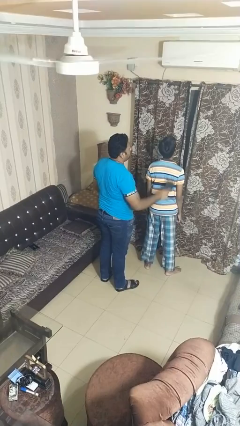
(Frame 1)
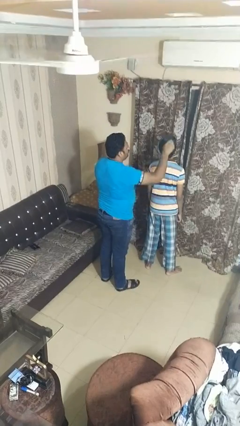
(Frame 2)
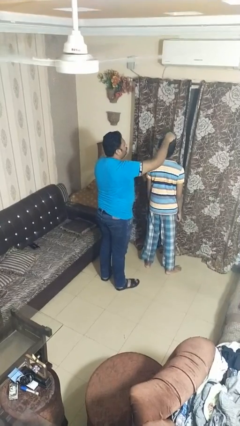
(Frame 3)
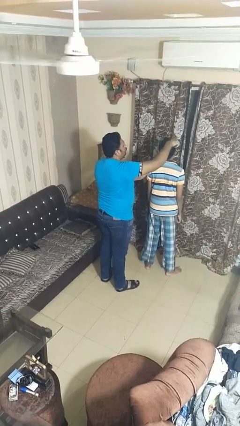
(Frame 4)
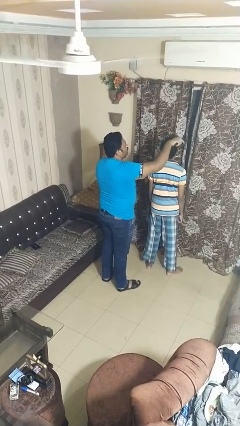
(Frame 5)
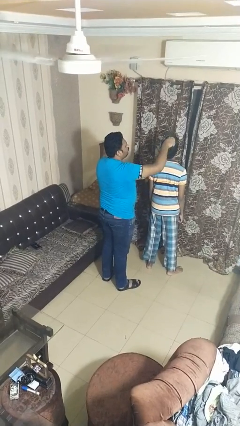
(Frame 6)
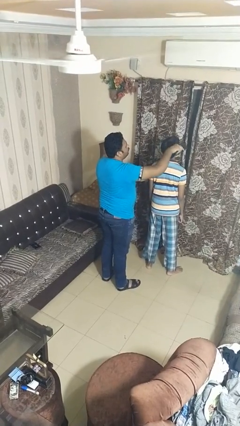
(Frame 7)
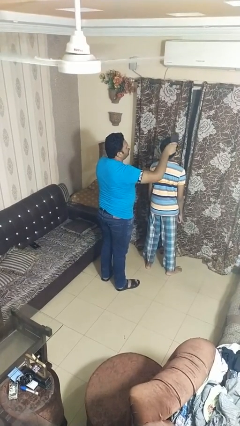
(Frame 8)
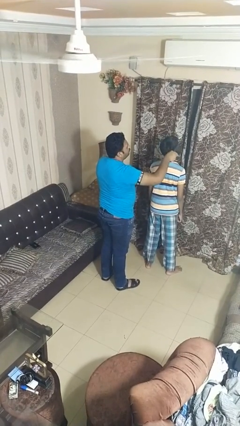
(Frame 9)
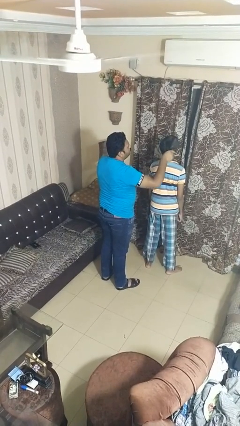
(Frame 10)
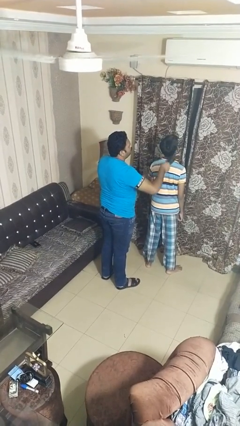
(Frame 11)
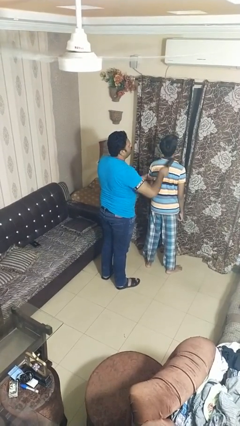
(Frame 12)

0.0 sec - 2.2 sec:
person brushes hair of person

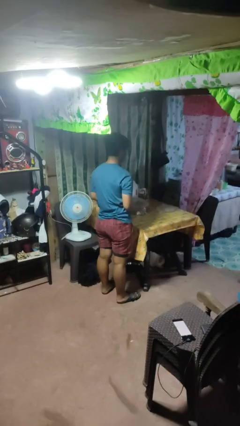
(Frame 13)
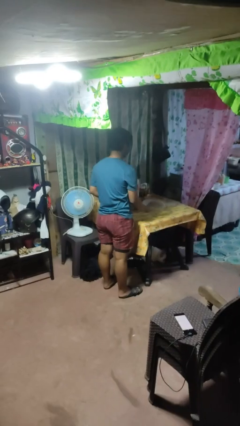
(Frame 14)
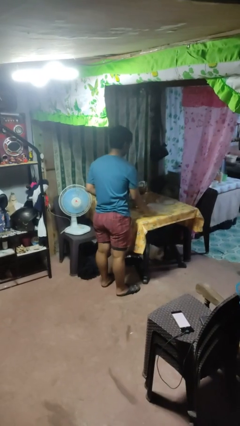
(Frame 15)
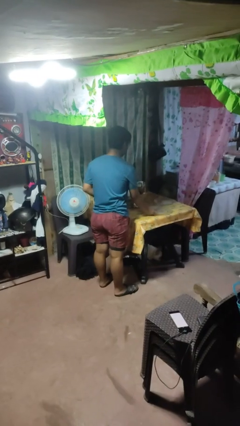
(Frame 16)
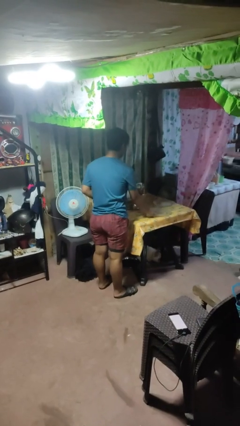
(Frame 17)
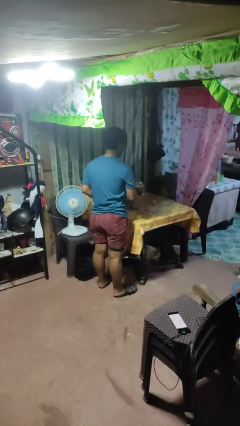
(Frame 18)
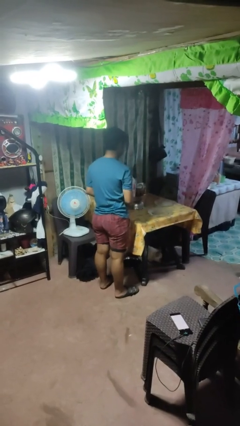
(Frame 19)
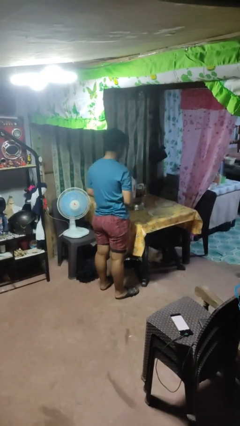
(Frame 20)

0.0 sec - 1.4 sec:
person sets table

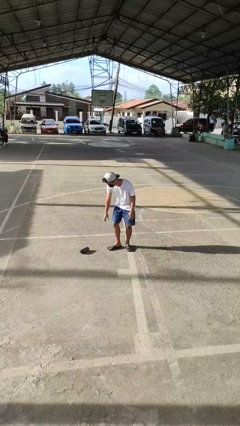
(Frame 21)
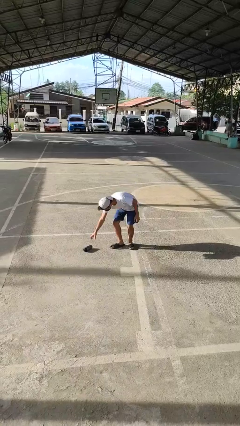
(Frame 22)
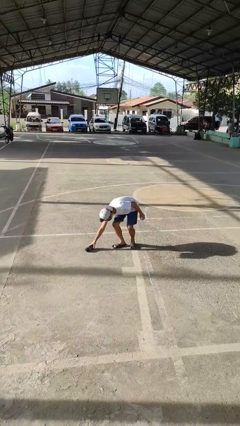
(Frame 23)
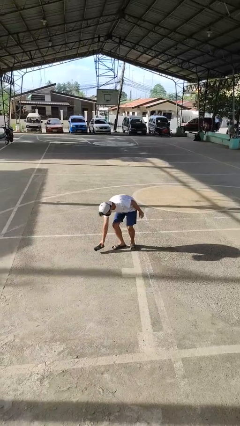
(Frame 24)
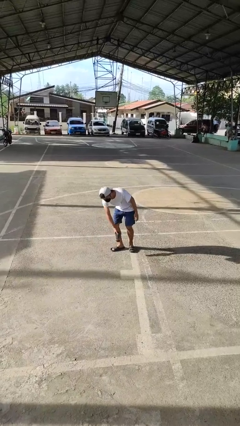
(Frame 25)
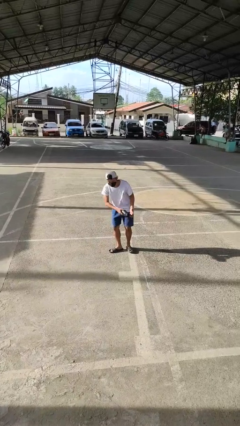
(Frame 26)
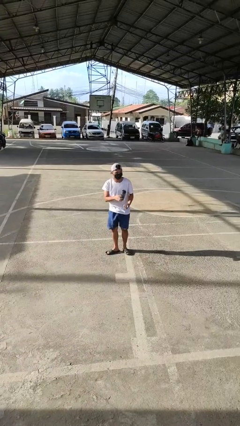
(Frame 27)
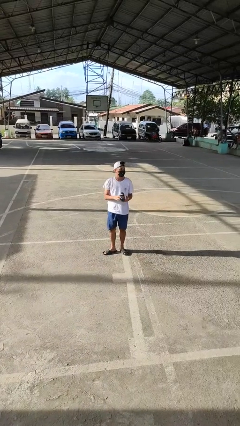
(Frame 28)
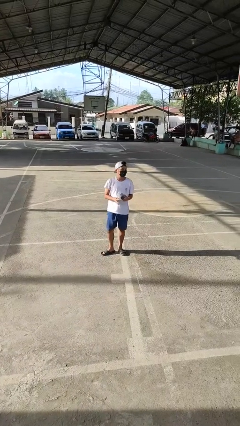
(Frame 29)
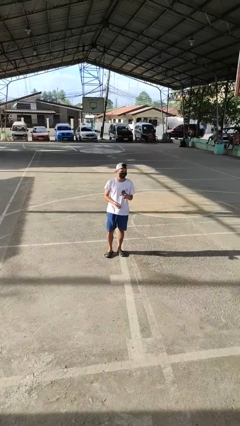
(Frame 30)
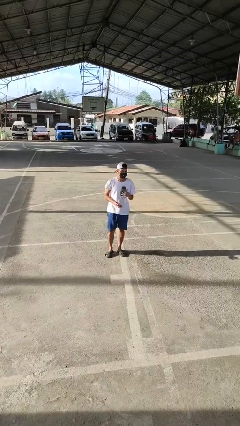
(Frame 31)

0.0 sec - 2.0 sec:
person picks up object from floor

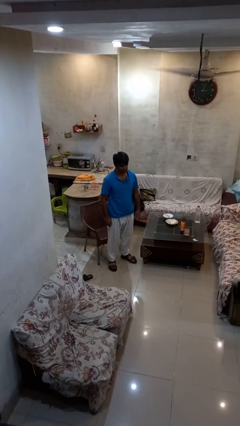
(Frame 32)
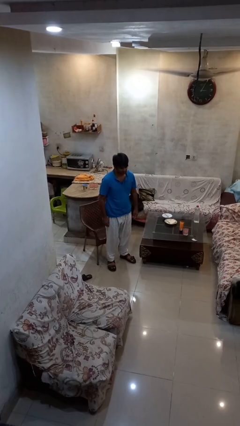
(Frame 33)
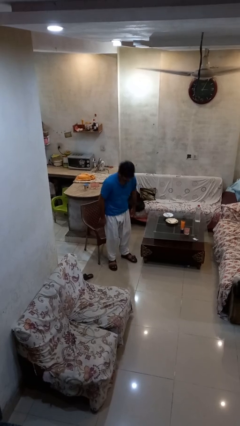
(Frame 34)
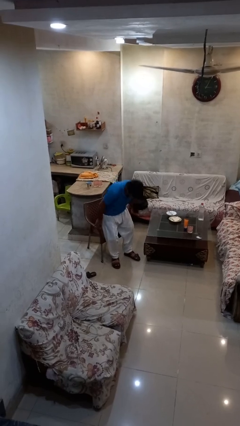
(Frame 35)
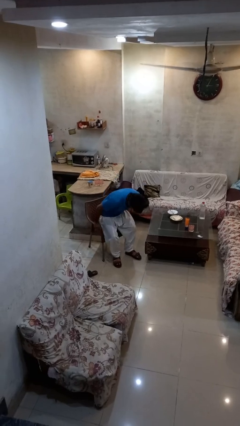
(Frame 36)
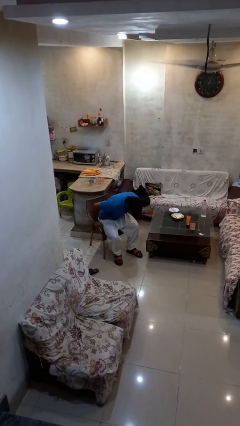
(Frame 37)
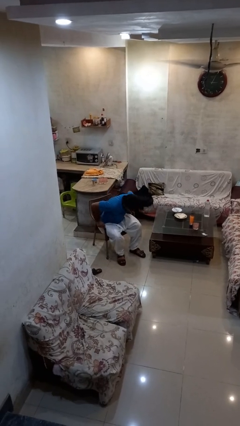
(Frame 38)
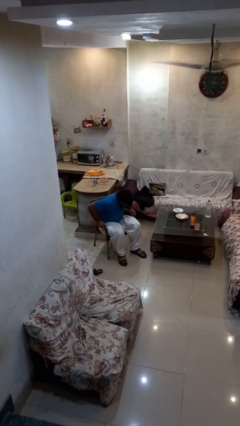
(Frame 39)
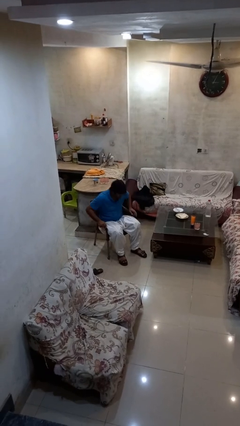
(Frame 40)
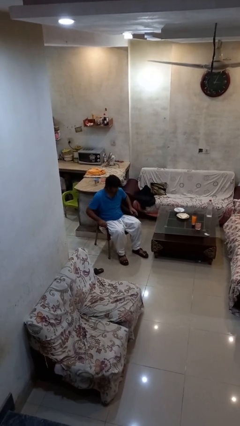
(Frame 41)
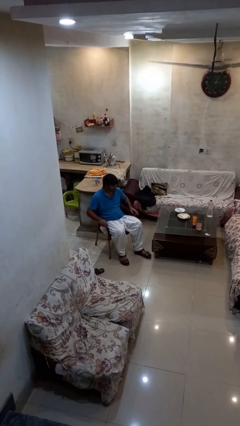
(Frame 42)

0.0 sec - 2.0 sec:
person sits down

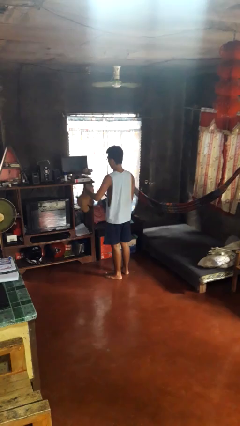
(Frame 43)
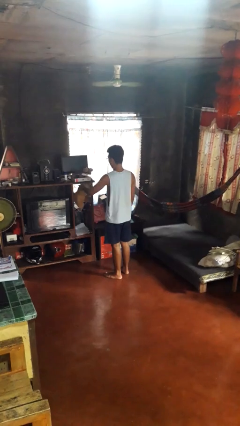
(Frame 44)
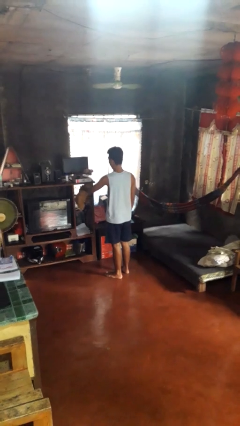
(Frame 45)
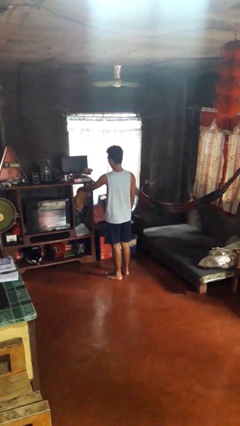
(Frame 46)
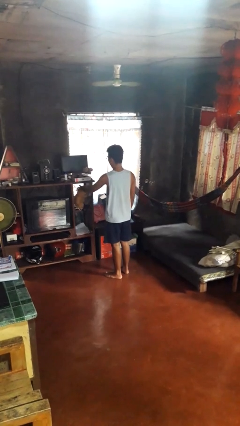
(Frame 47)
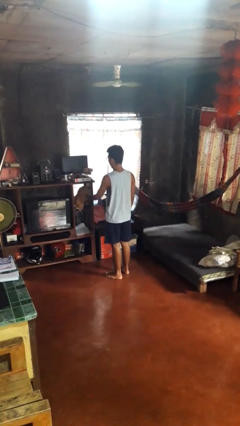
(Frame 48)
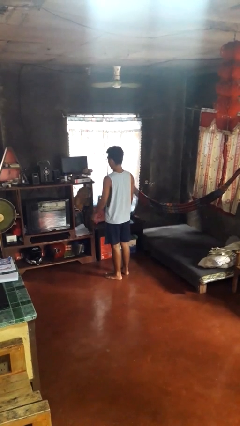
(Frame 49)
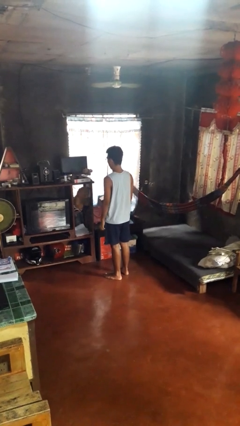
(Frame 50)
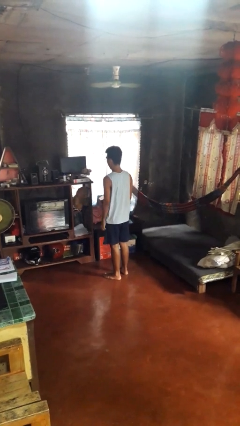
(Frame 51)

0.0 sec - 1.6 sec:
person puts down object into cabinet

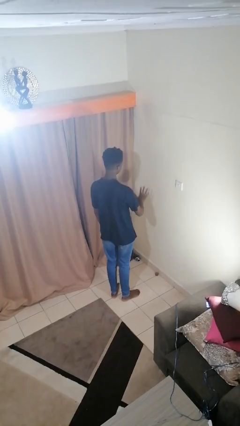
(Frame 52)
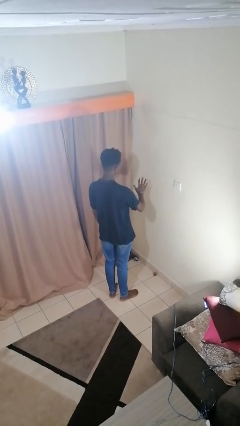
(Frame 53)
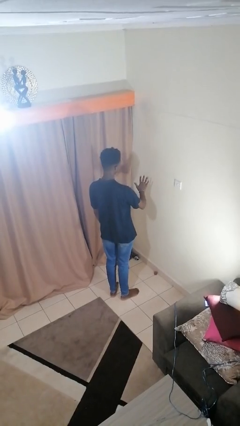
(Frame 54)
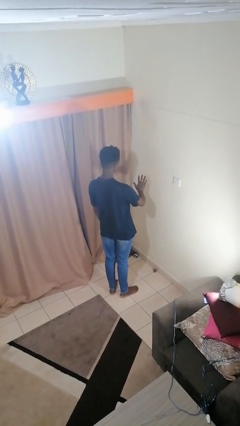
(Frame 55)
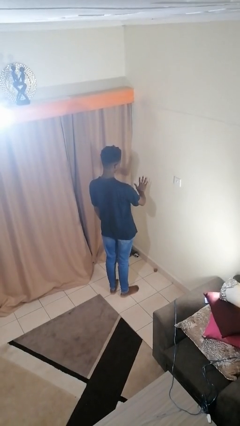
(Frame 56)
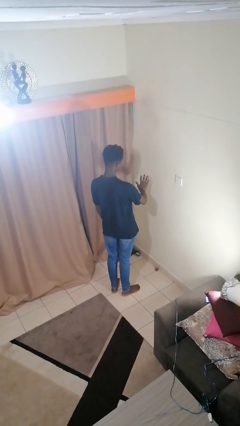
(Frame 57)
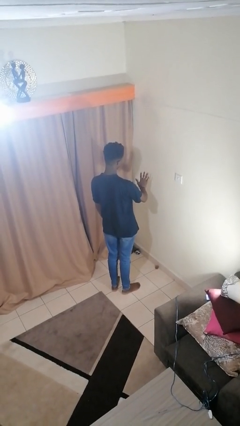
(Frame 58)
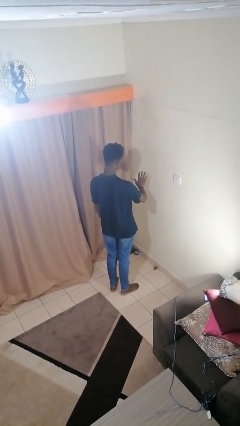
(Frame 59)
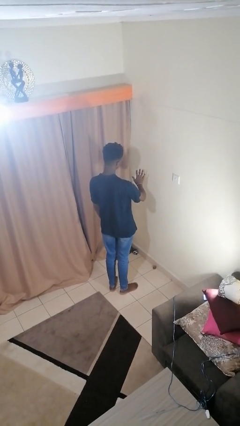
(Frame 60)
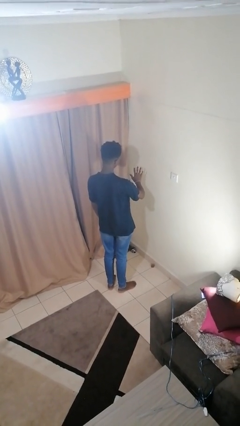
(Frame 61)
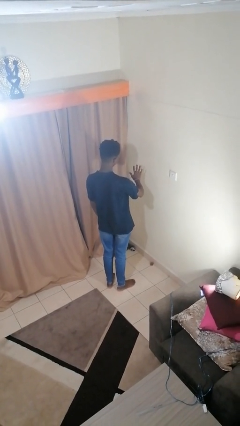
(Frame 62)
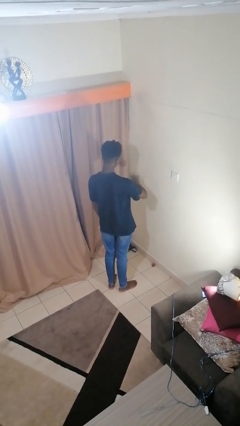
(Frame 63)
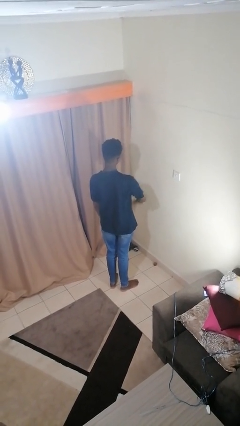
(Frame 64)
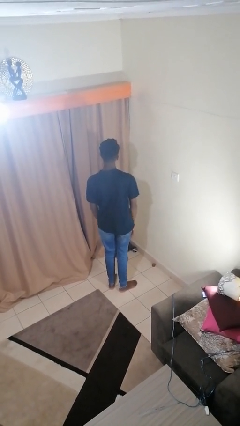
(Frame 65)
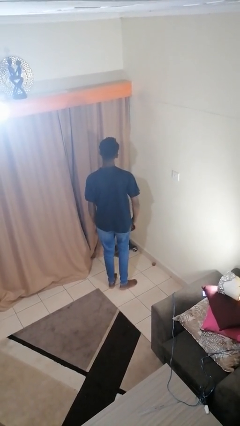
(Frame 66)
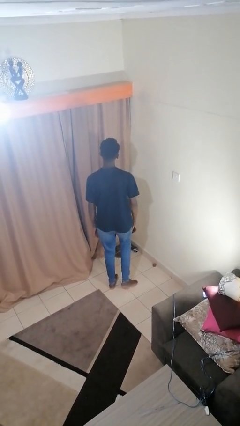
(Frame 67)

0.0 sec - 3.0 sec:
person gestures number five

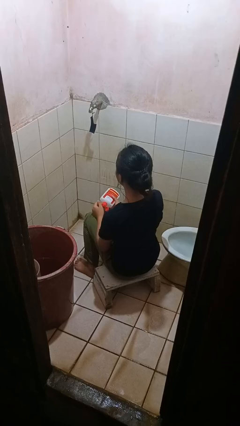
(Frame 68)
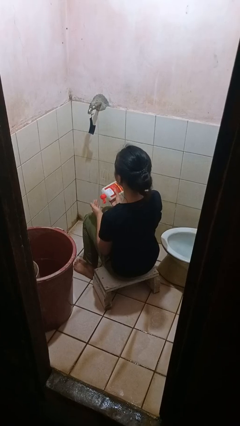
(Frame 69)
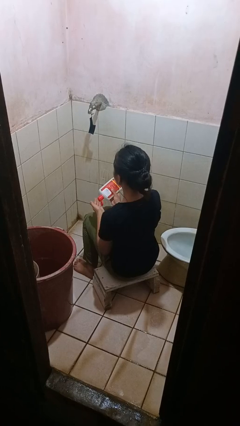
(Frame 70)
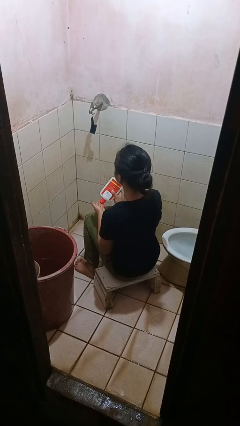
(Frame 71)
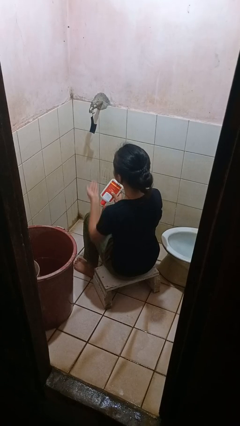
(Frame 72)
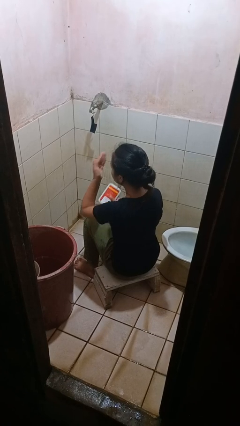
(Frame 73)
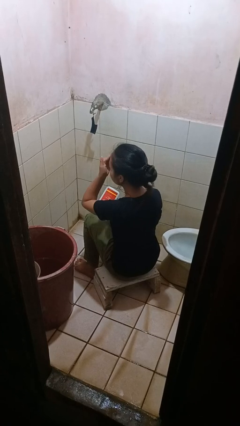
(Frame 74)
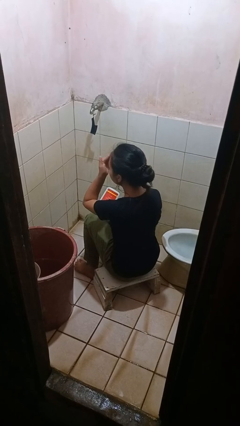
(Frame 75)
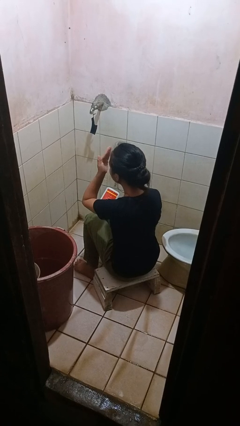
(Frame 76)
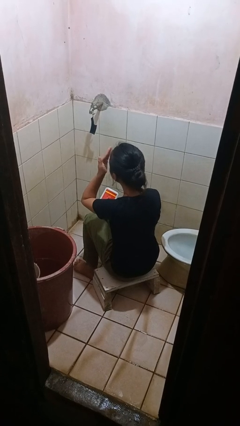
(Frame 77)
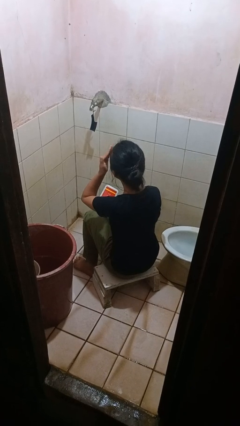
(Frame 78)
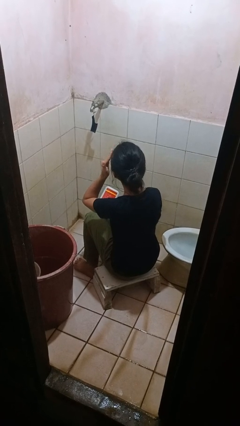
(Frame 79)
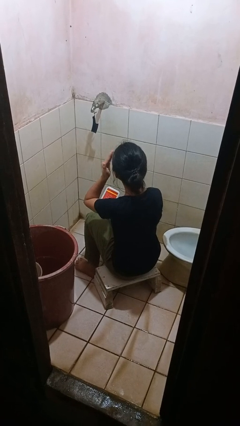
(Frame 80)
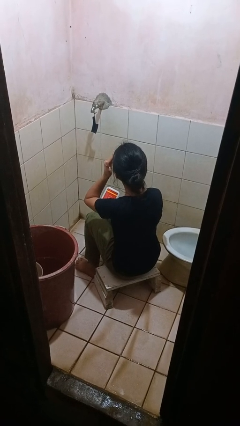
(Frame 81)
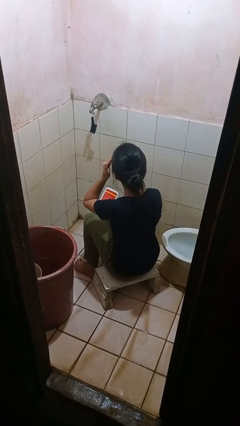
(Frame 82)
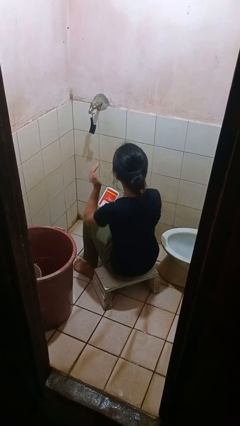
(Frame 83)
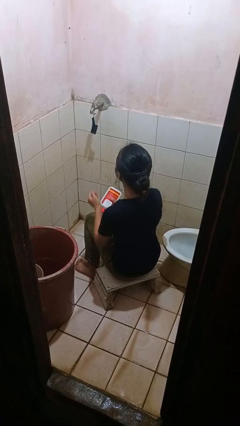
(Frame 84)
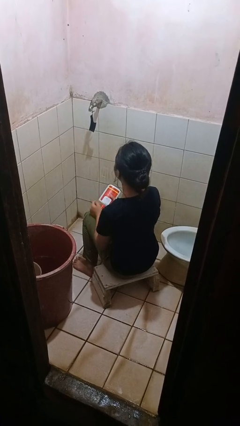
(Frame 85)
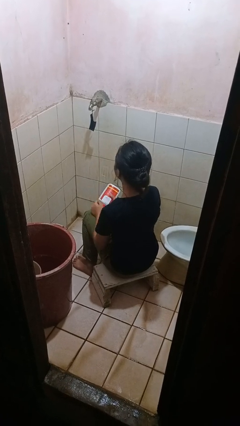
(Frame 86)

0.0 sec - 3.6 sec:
person applies facial moisturizer

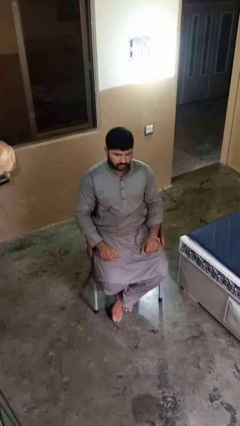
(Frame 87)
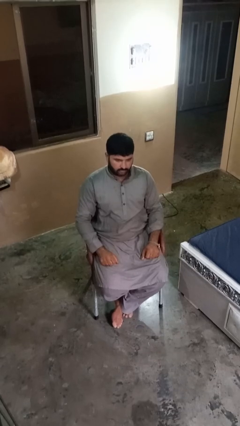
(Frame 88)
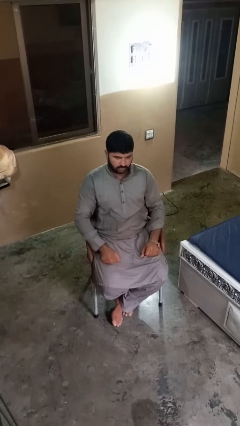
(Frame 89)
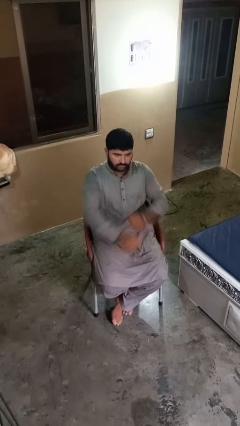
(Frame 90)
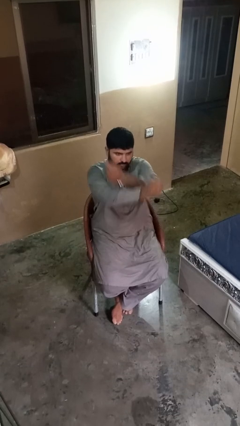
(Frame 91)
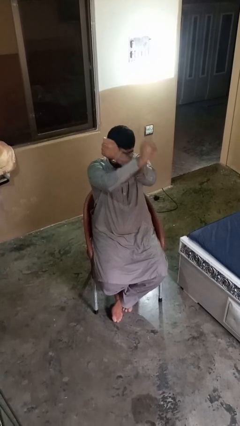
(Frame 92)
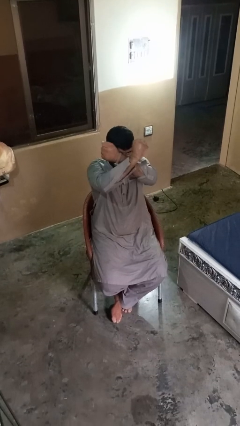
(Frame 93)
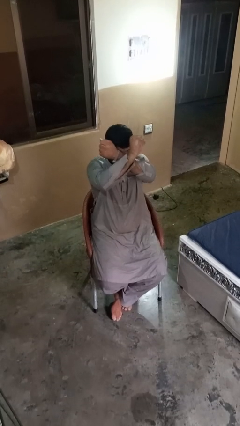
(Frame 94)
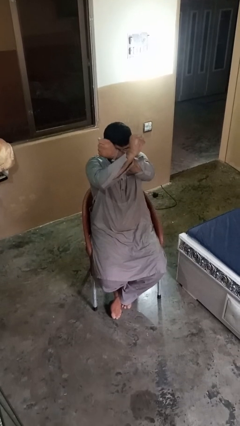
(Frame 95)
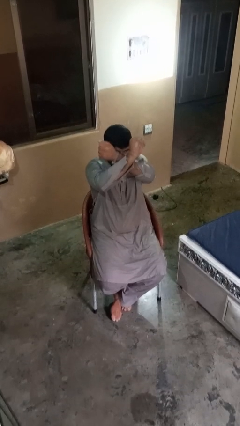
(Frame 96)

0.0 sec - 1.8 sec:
person gestures arms x
